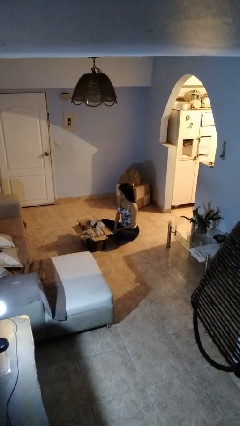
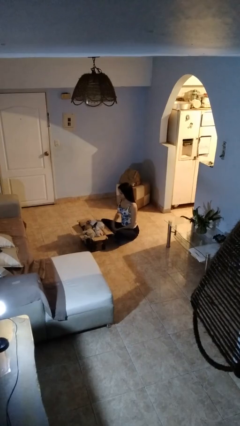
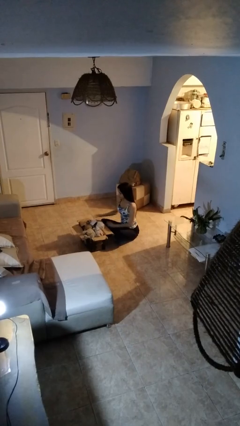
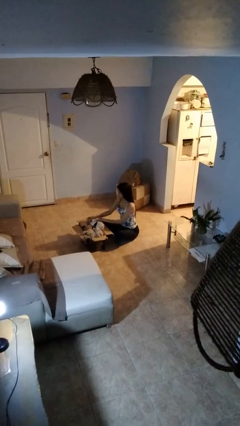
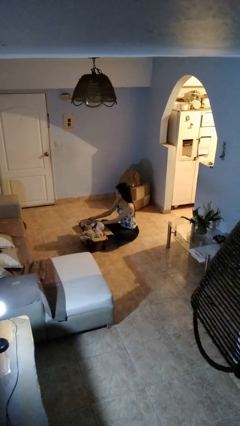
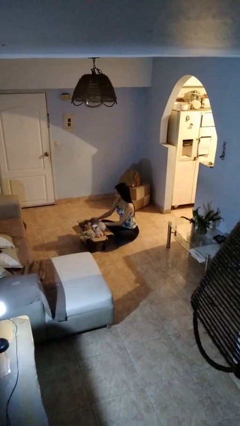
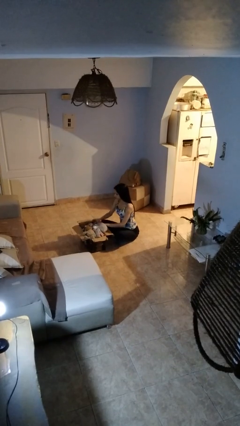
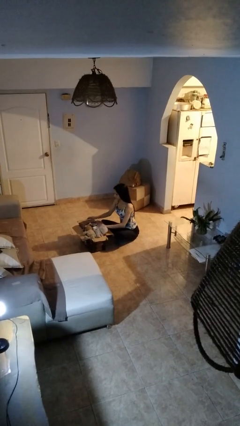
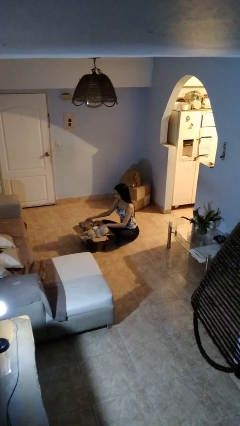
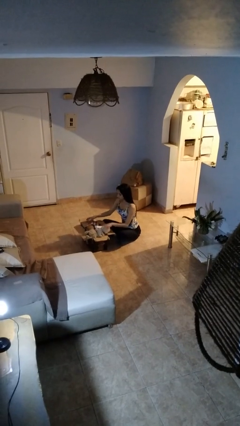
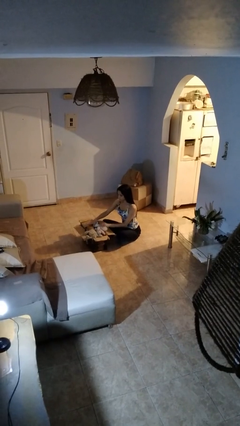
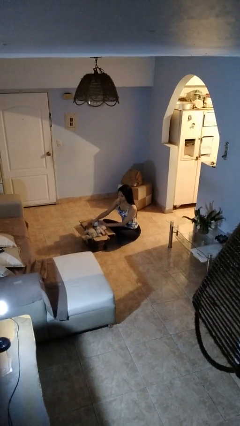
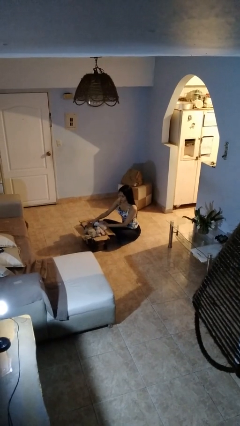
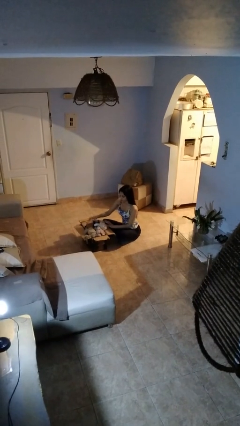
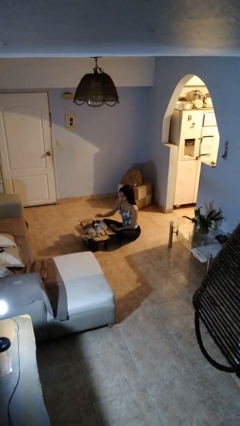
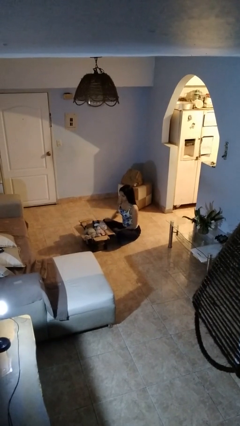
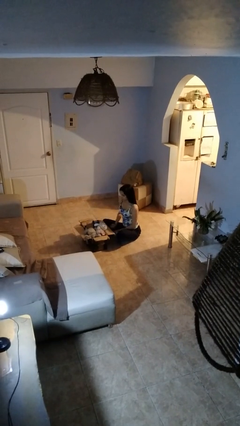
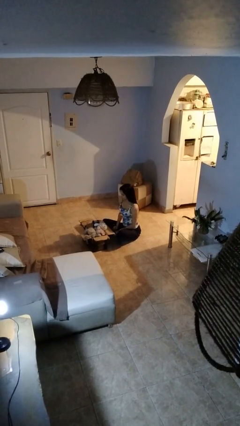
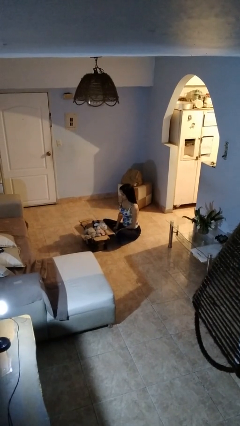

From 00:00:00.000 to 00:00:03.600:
person searches in box

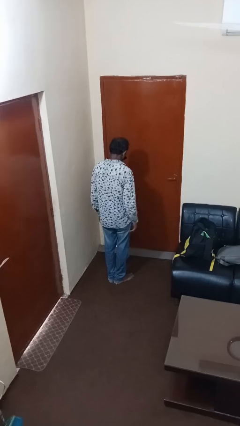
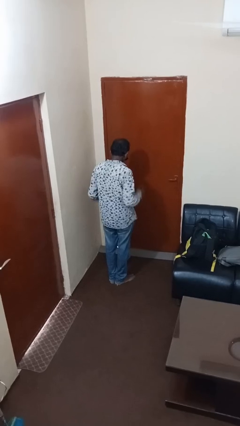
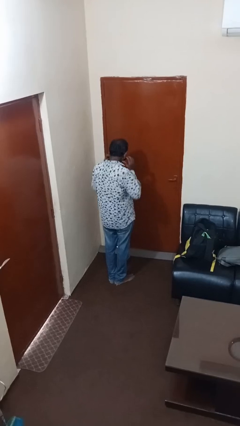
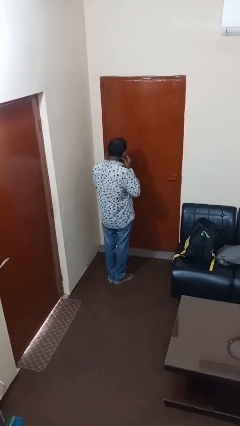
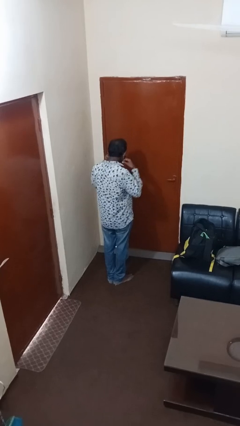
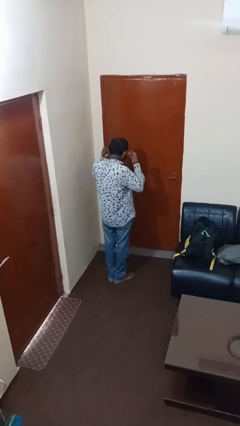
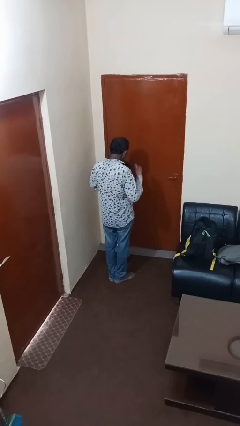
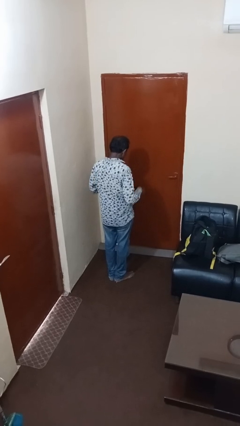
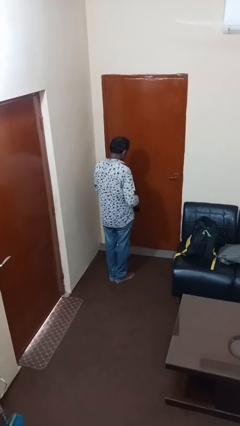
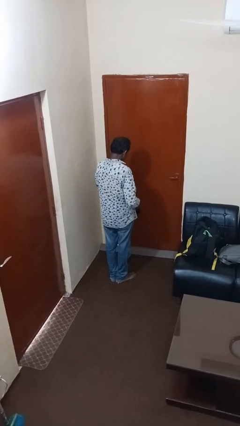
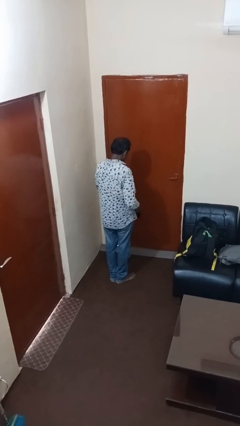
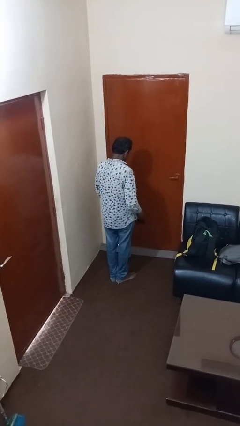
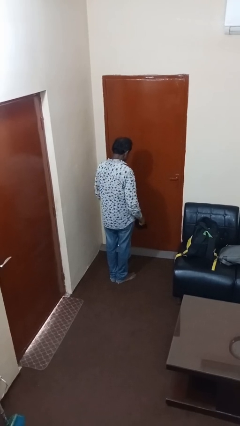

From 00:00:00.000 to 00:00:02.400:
person takes off facemask

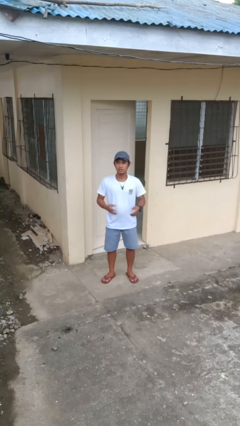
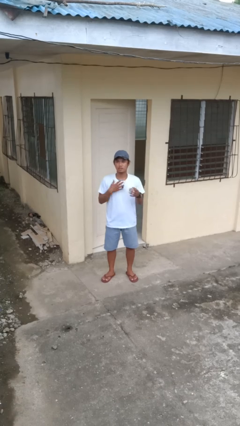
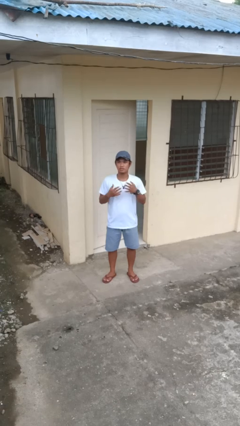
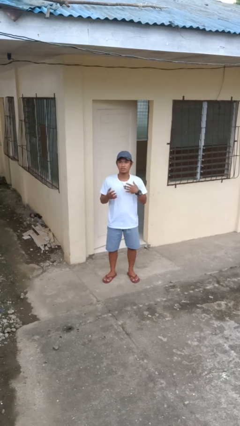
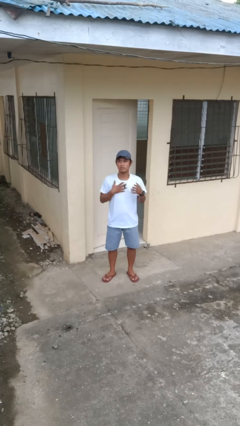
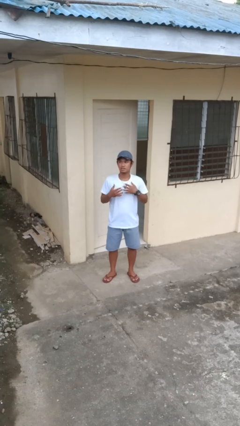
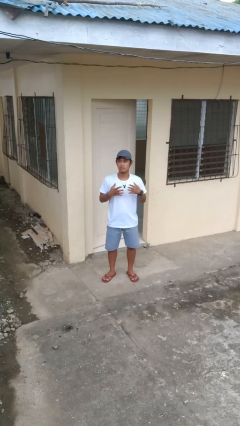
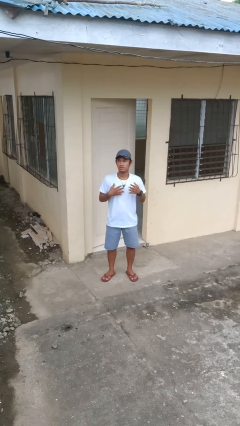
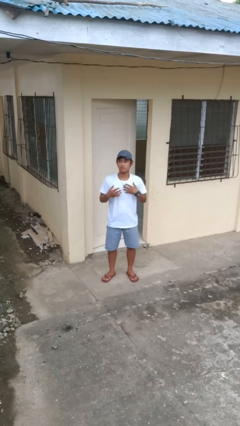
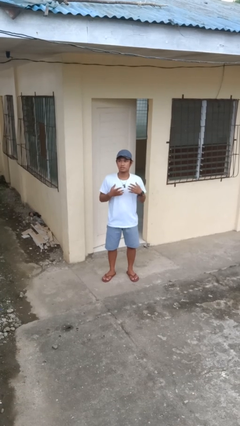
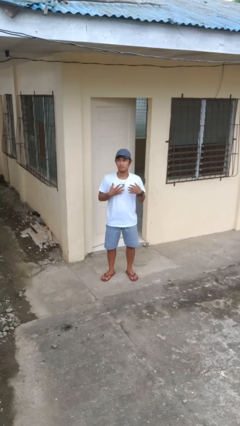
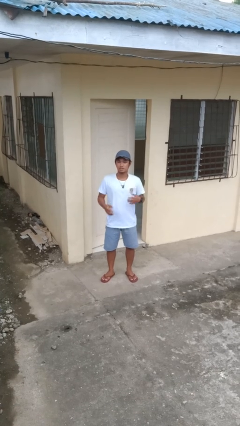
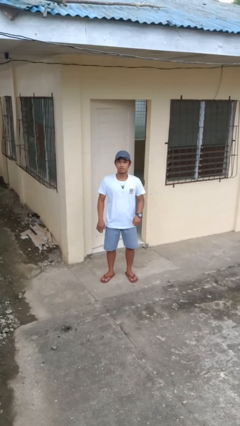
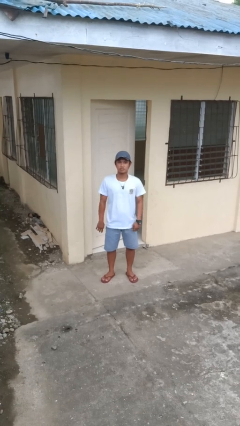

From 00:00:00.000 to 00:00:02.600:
person drums on chest

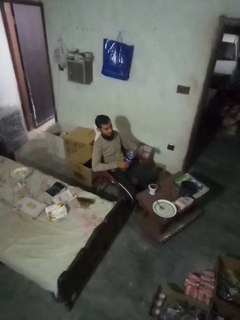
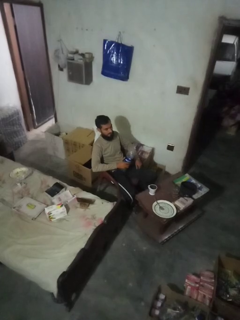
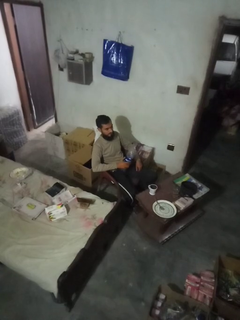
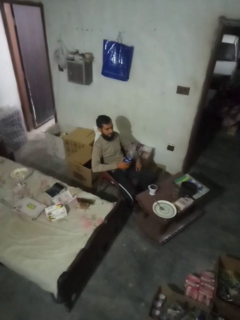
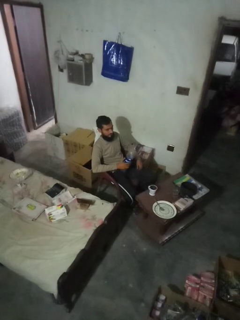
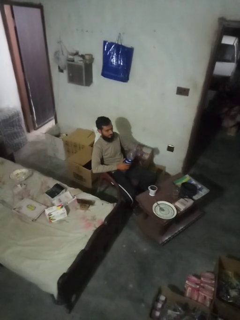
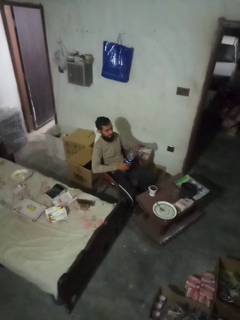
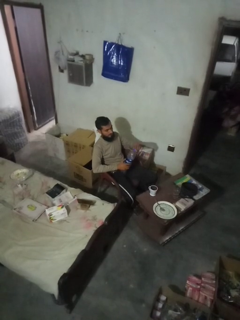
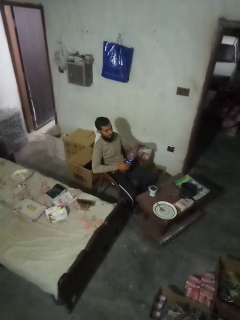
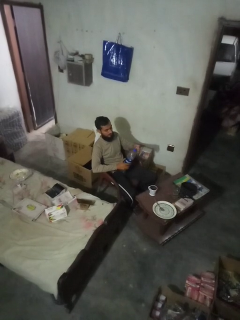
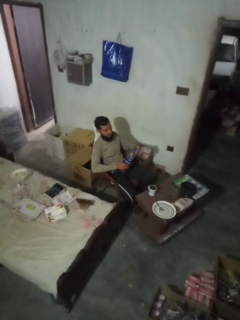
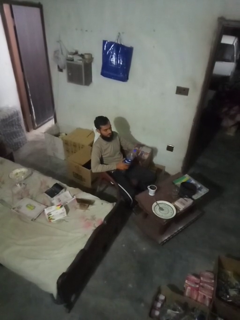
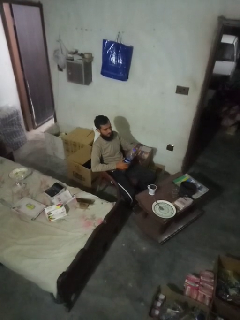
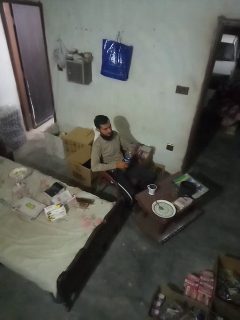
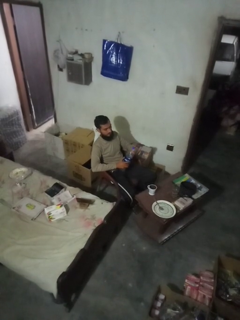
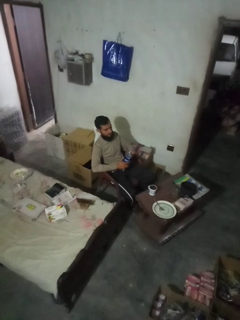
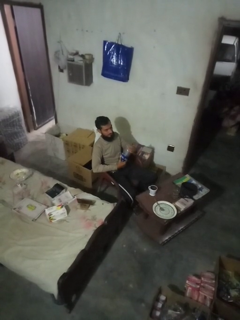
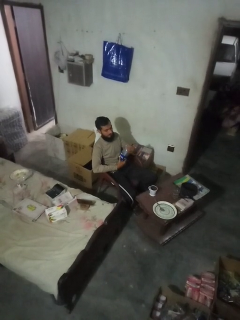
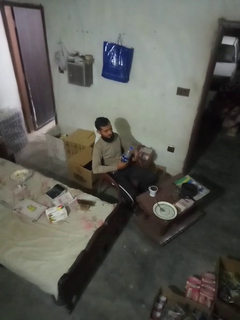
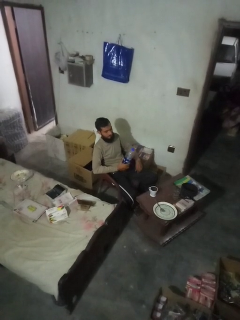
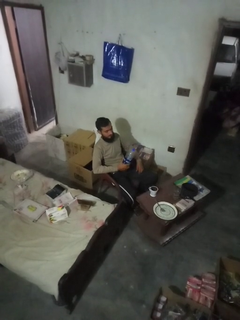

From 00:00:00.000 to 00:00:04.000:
person screws lid to bottle

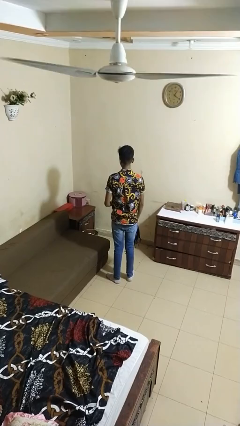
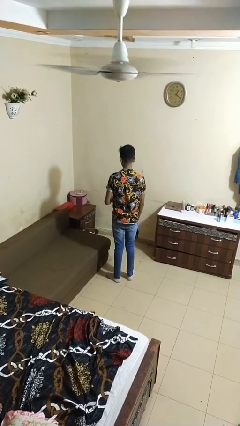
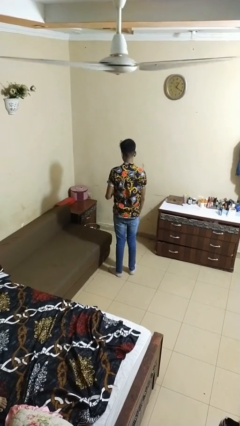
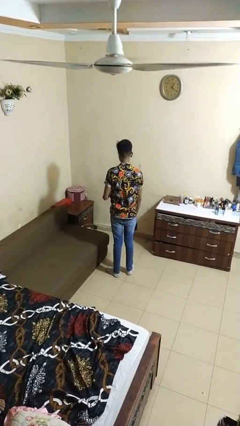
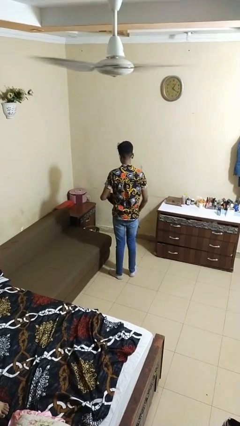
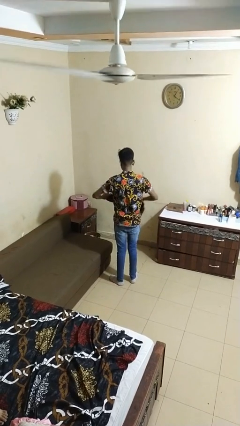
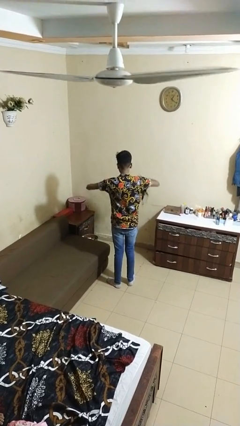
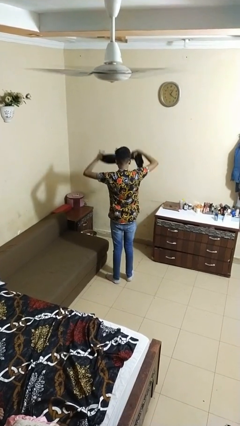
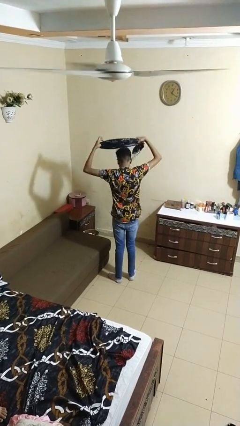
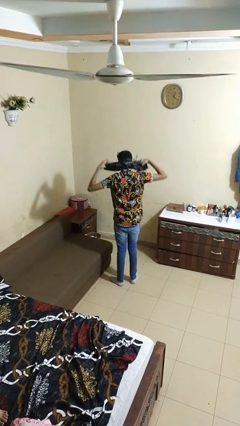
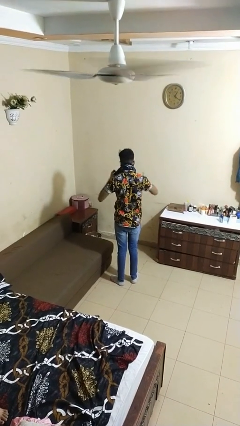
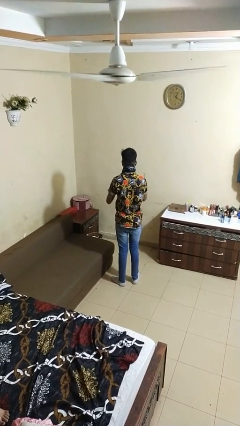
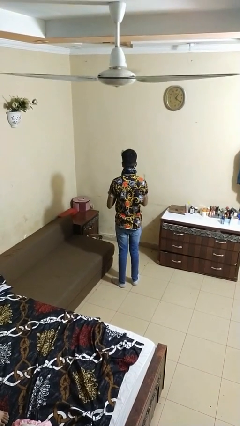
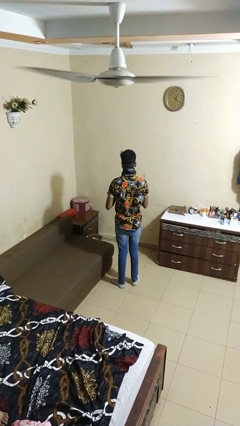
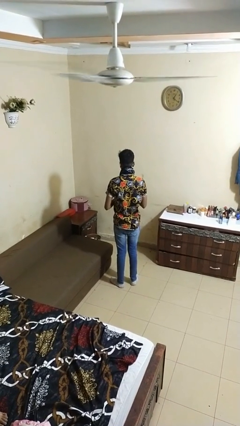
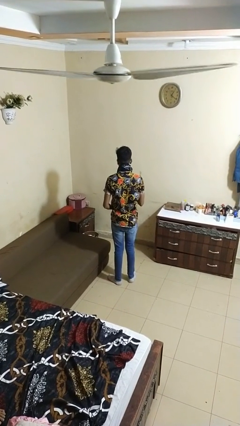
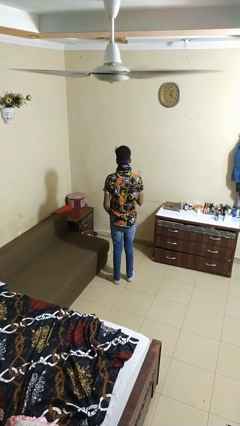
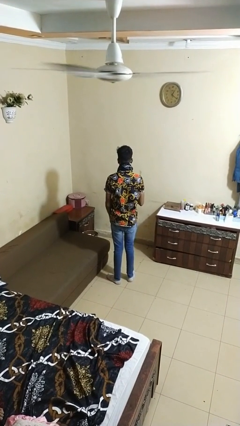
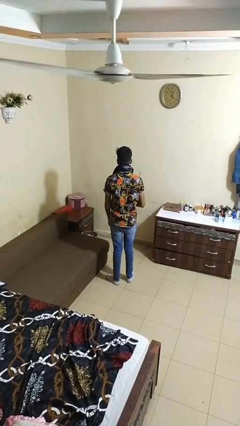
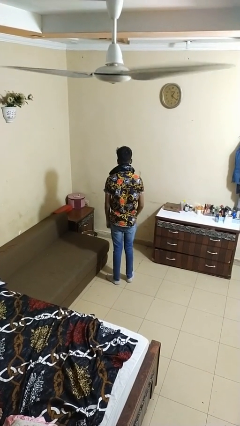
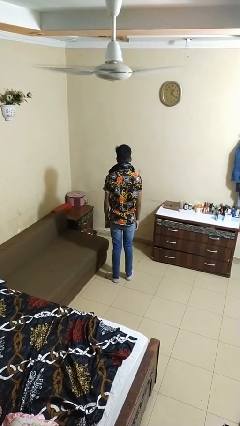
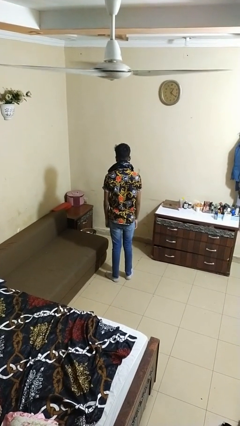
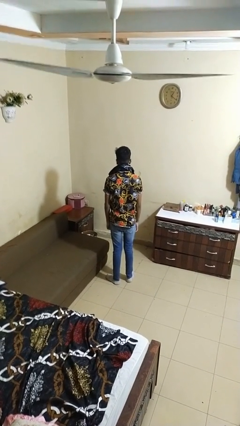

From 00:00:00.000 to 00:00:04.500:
person puts on scarf

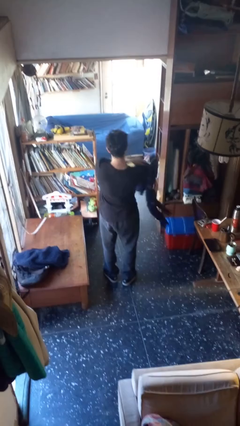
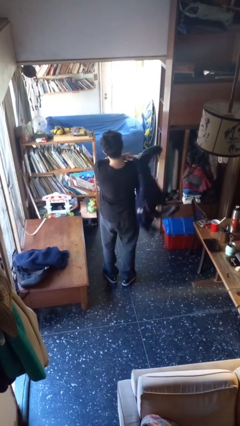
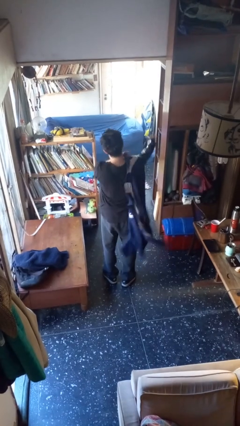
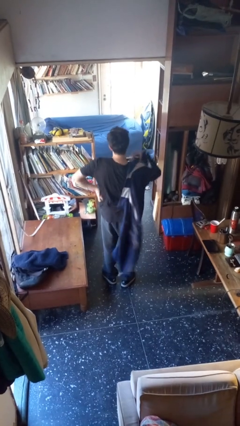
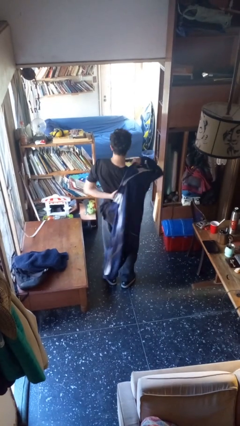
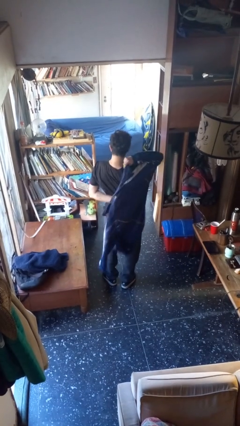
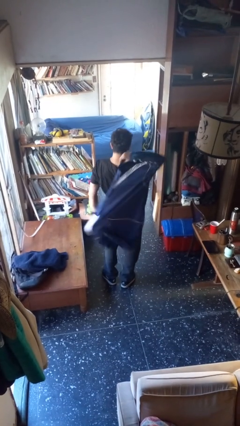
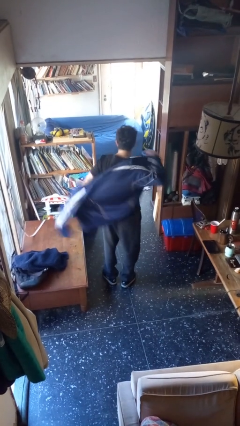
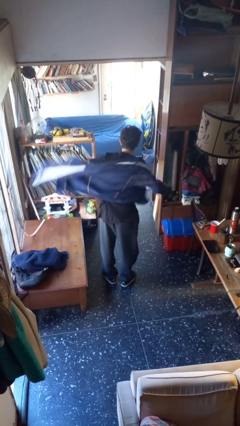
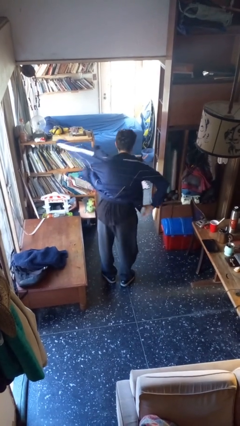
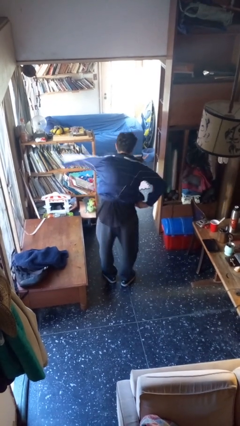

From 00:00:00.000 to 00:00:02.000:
person puts on jacket
